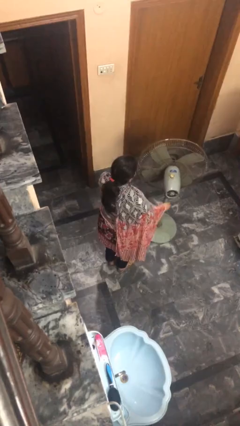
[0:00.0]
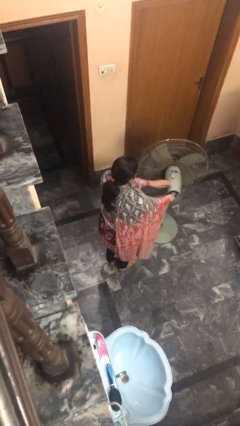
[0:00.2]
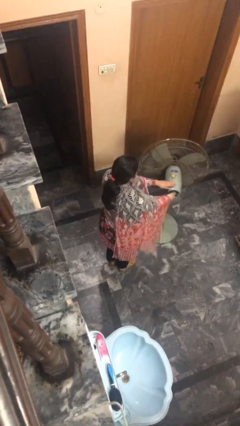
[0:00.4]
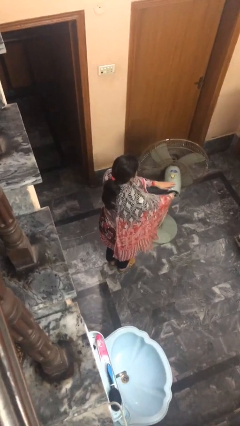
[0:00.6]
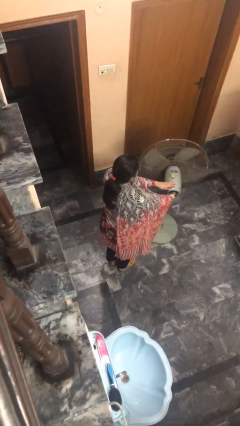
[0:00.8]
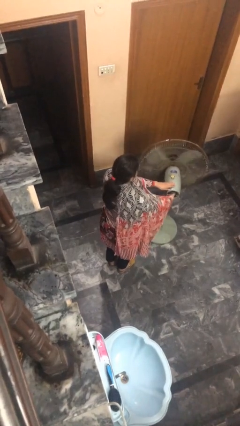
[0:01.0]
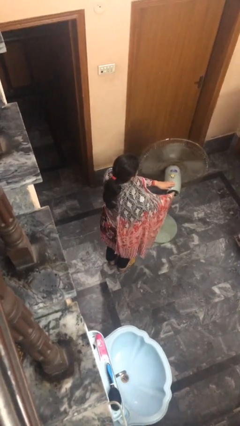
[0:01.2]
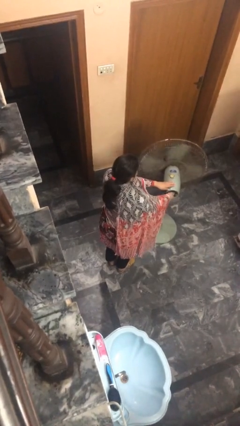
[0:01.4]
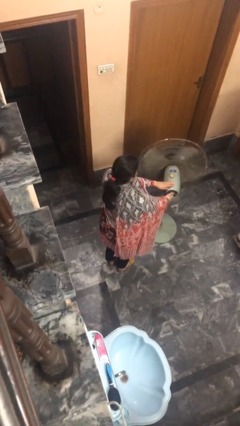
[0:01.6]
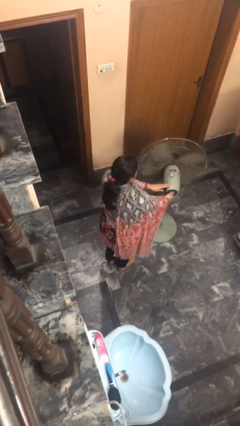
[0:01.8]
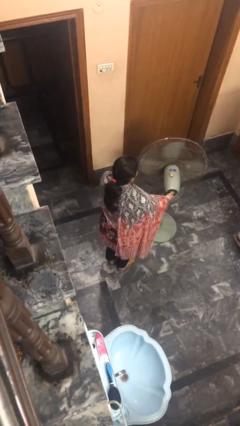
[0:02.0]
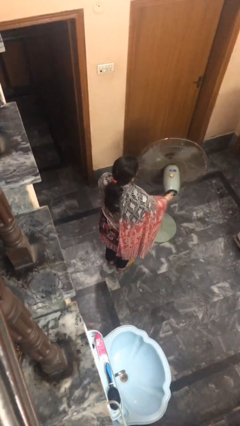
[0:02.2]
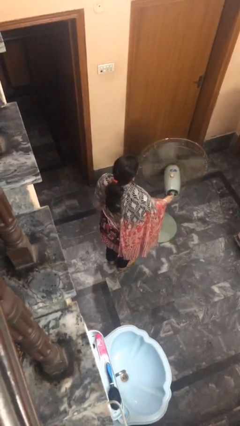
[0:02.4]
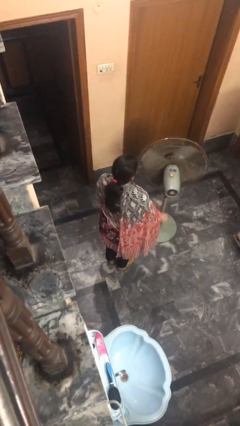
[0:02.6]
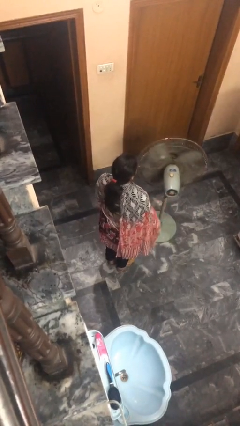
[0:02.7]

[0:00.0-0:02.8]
person turns on fan

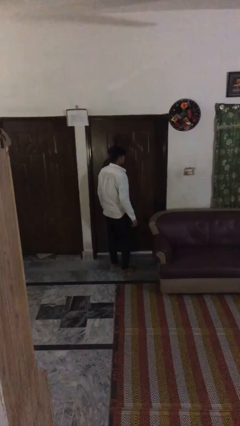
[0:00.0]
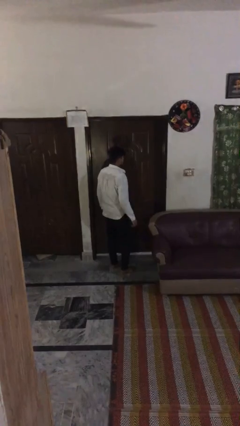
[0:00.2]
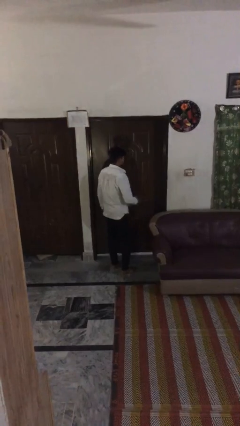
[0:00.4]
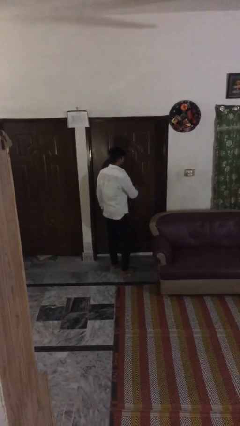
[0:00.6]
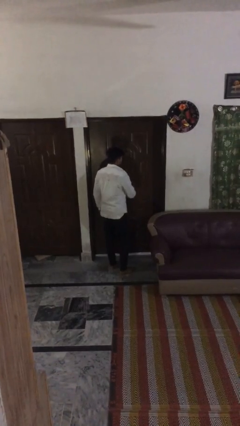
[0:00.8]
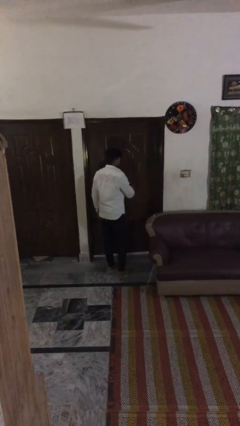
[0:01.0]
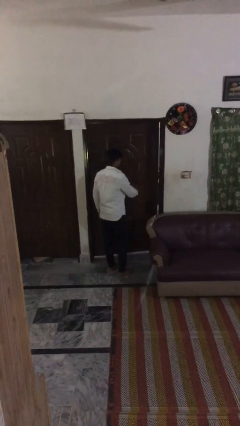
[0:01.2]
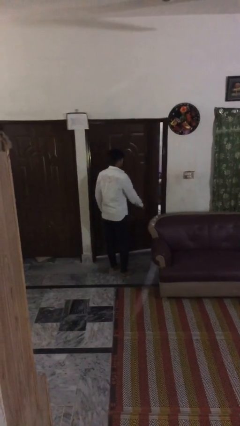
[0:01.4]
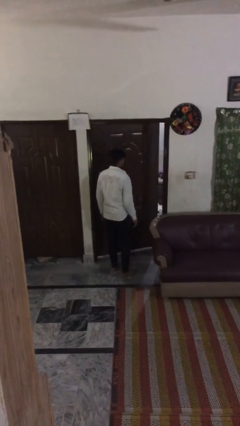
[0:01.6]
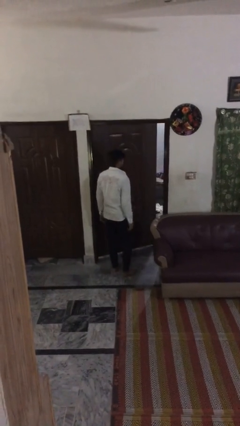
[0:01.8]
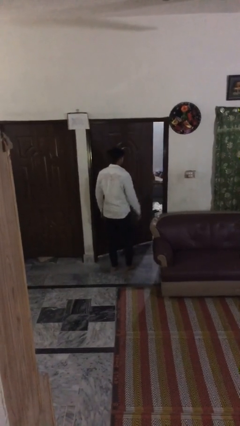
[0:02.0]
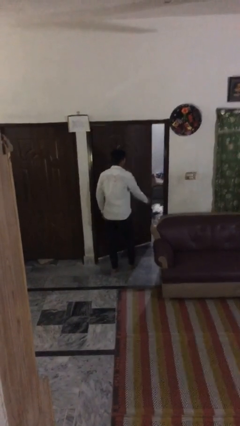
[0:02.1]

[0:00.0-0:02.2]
person opens facility door

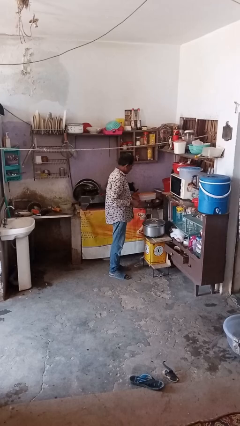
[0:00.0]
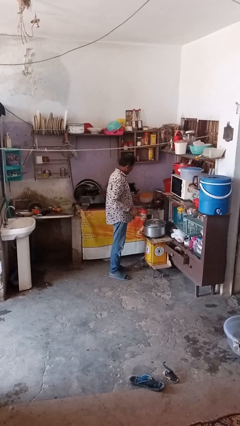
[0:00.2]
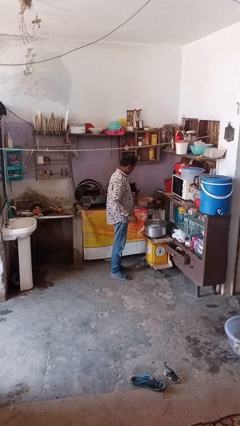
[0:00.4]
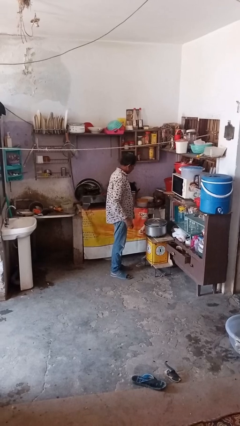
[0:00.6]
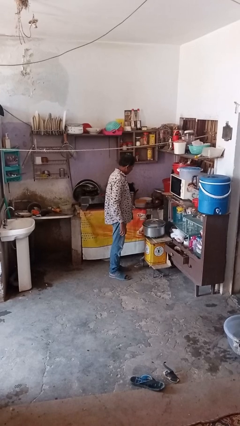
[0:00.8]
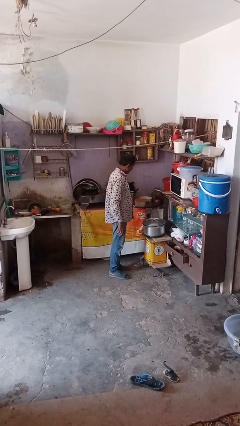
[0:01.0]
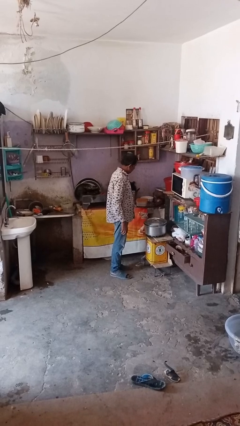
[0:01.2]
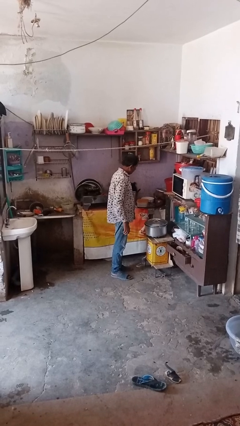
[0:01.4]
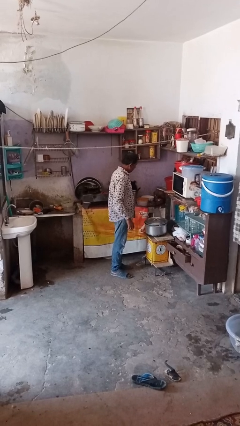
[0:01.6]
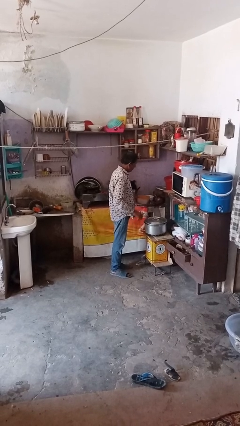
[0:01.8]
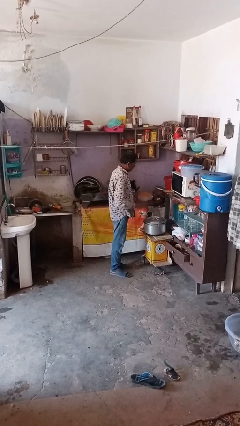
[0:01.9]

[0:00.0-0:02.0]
person puts down object on shelf

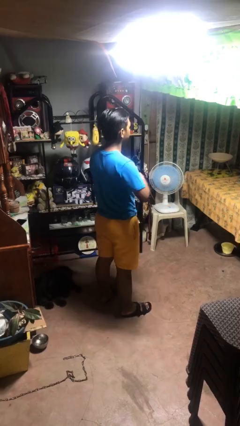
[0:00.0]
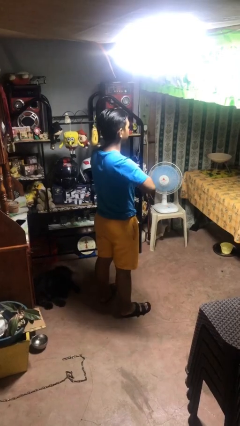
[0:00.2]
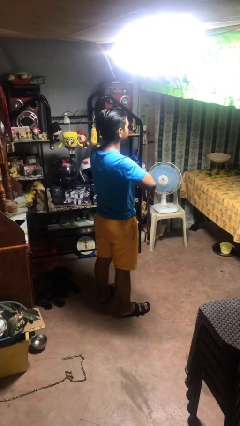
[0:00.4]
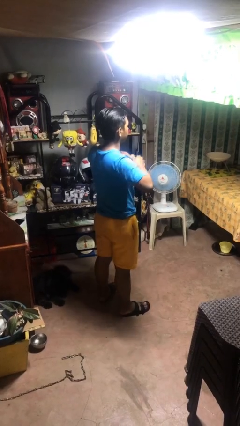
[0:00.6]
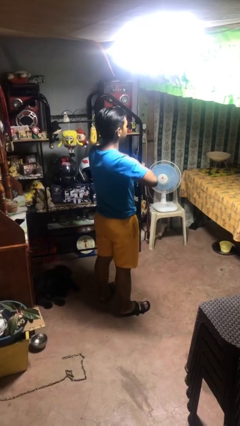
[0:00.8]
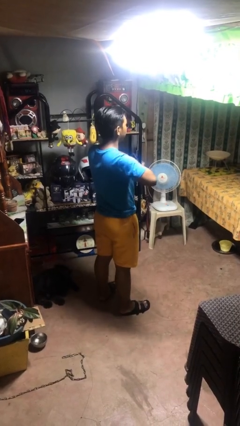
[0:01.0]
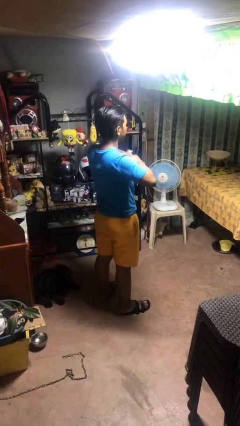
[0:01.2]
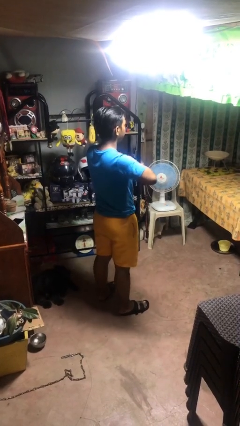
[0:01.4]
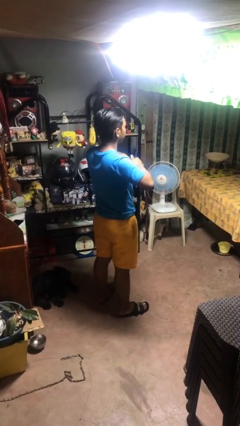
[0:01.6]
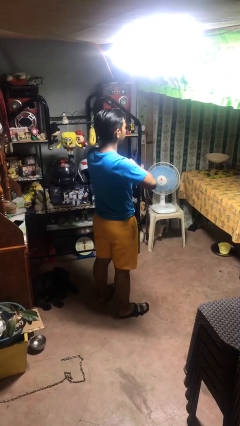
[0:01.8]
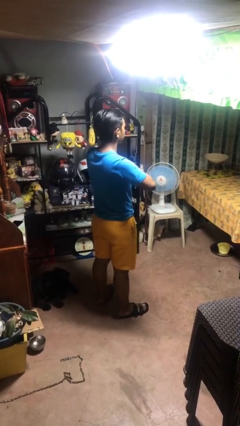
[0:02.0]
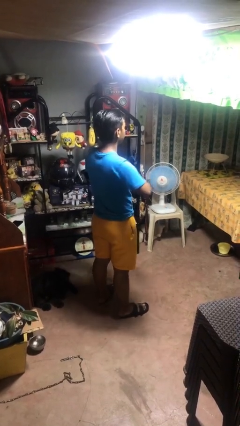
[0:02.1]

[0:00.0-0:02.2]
person cracks knuckles

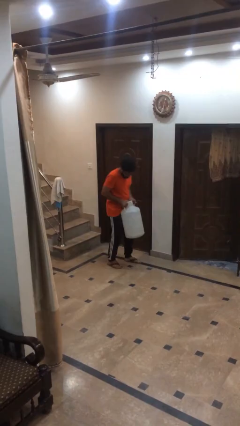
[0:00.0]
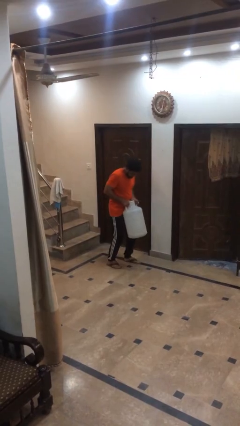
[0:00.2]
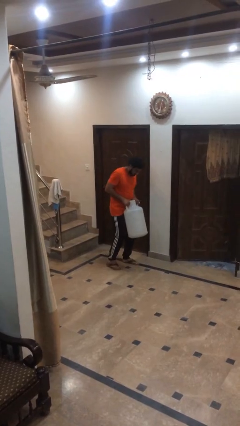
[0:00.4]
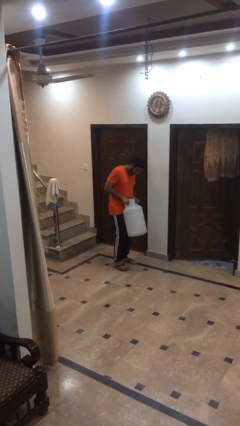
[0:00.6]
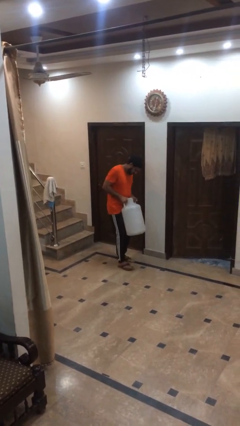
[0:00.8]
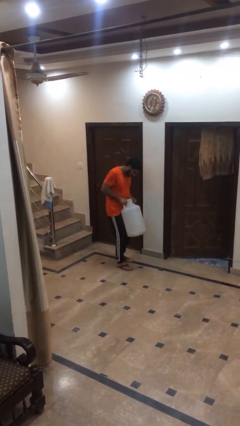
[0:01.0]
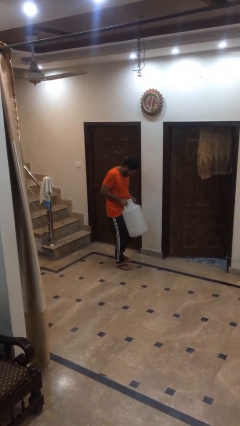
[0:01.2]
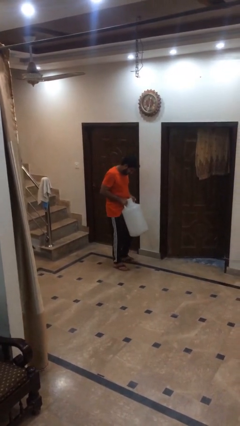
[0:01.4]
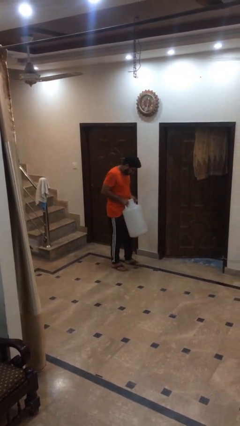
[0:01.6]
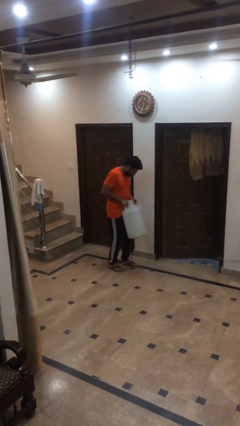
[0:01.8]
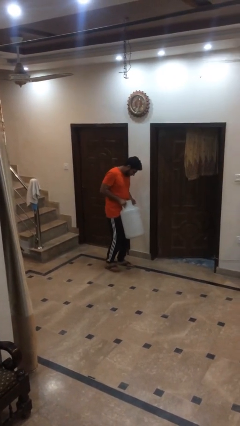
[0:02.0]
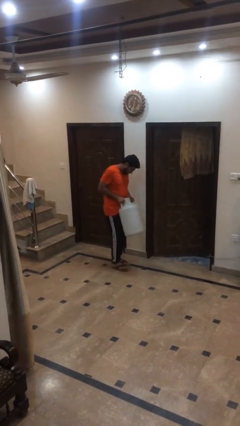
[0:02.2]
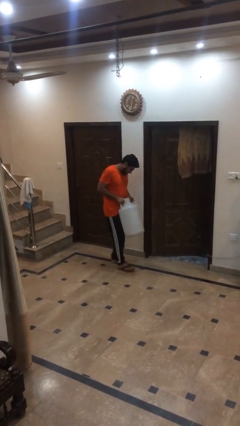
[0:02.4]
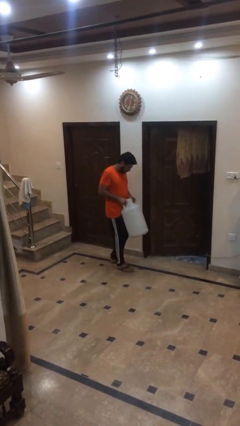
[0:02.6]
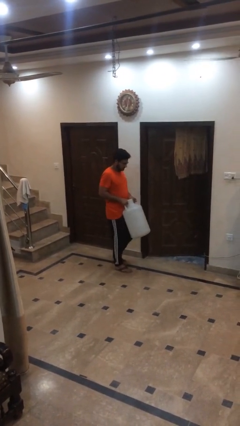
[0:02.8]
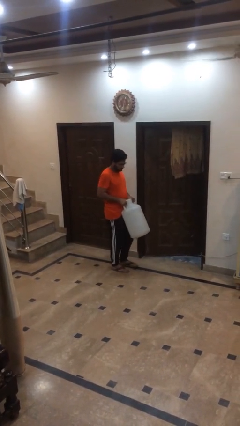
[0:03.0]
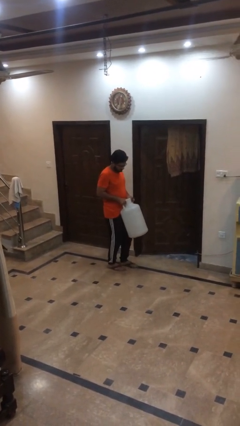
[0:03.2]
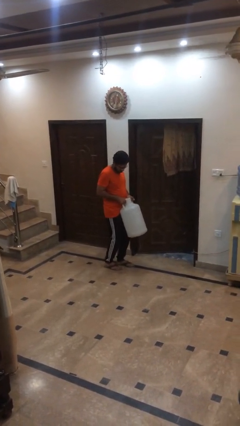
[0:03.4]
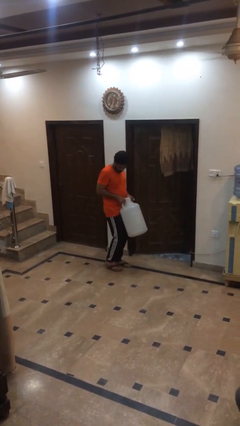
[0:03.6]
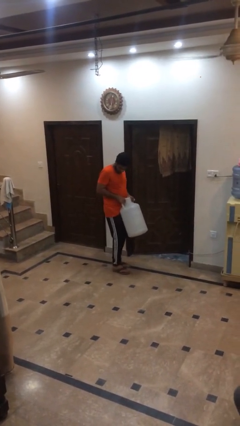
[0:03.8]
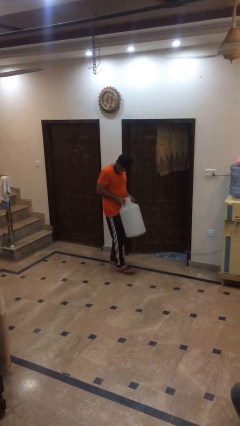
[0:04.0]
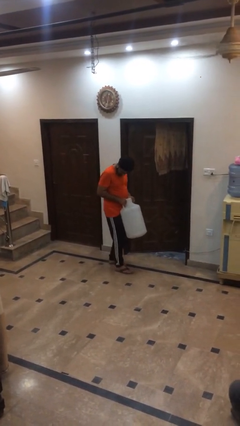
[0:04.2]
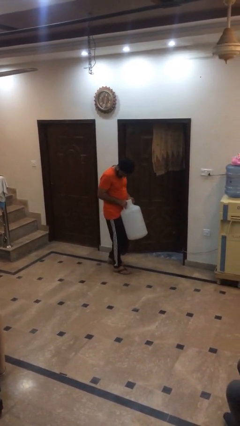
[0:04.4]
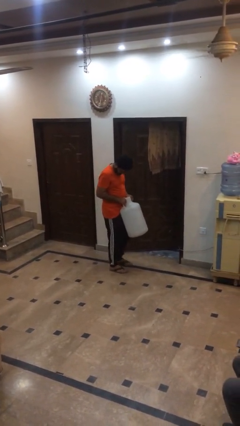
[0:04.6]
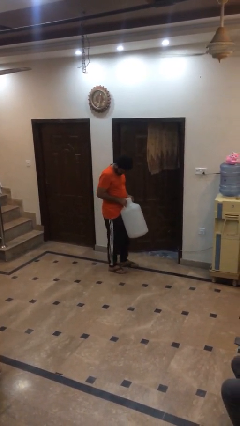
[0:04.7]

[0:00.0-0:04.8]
person carries heavy object

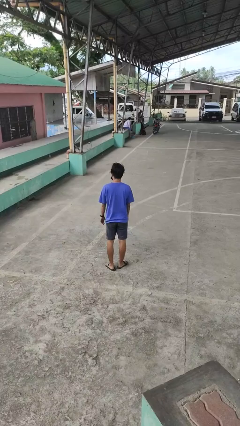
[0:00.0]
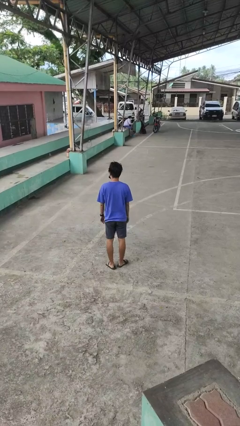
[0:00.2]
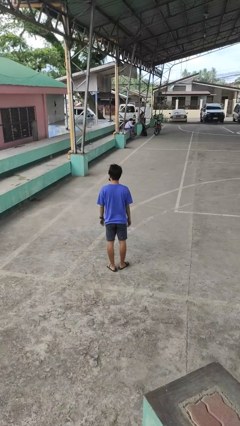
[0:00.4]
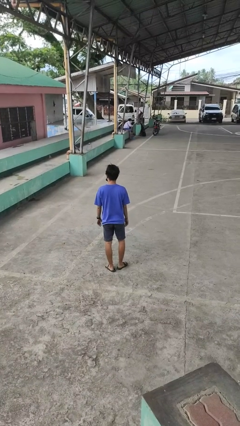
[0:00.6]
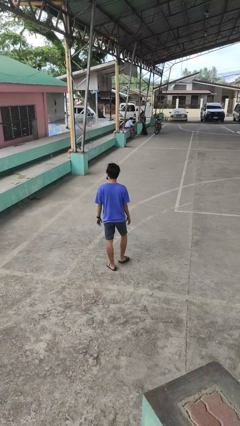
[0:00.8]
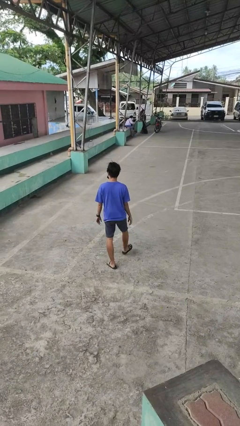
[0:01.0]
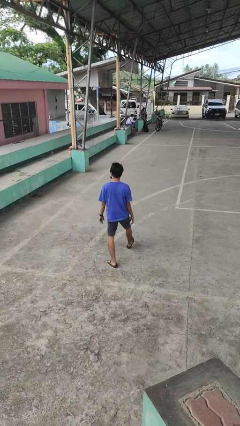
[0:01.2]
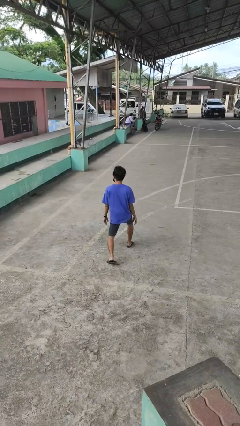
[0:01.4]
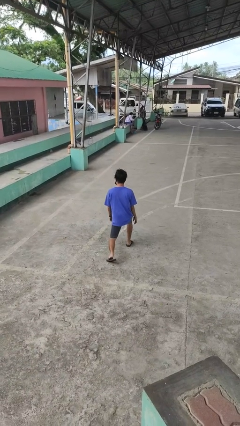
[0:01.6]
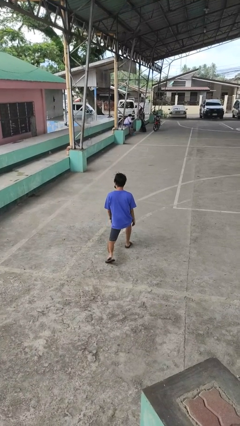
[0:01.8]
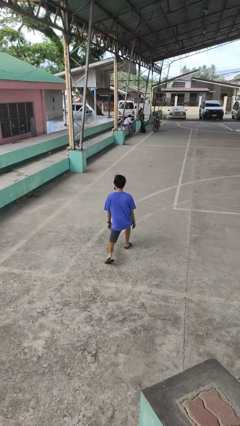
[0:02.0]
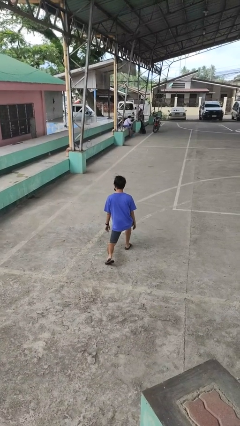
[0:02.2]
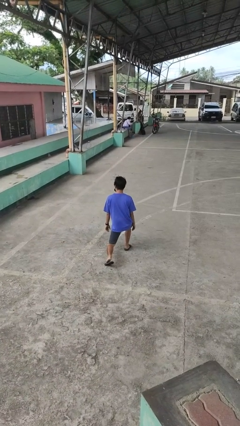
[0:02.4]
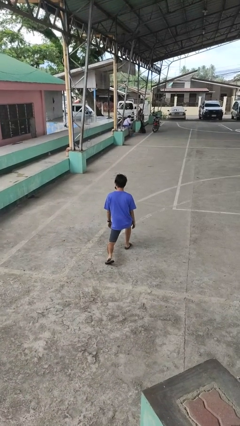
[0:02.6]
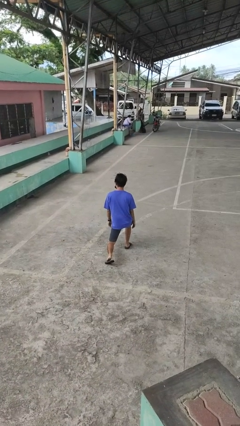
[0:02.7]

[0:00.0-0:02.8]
person exercises with lunges

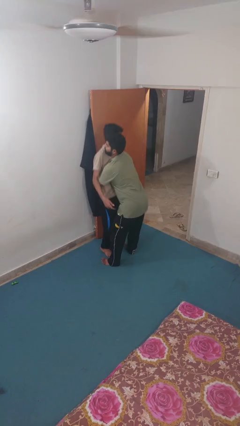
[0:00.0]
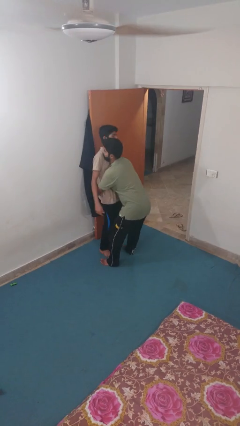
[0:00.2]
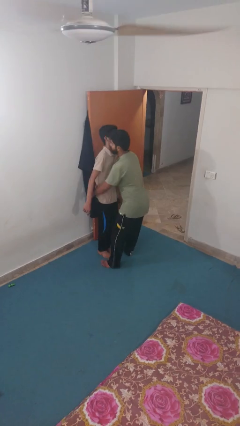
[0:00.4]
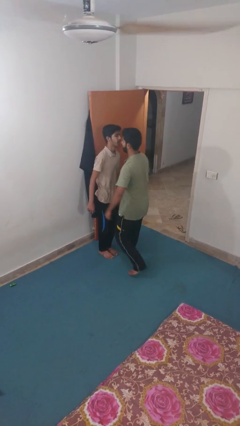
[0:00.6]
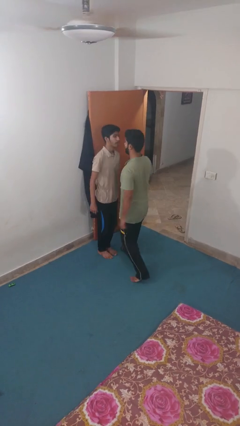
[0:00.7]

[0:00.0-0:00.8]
person puts down person
